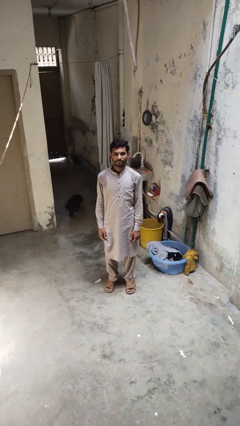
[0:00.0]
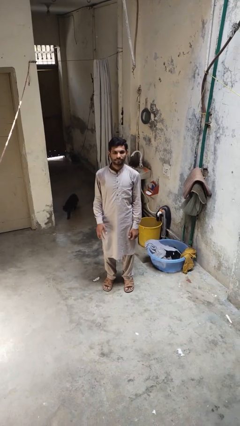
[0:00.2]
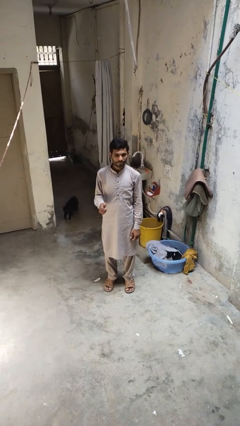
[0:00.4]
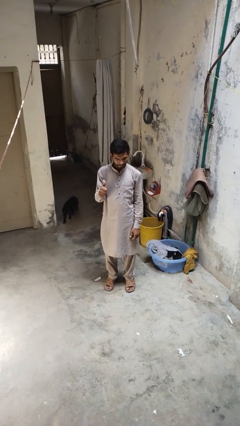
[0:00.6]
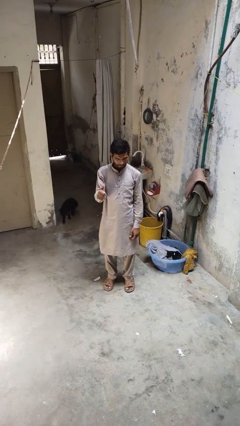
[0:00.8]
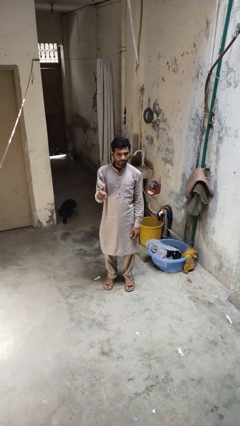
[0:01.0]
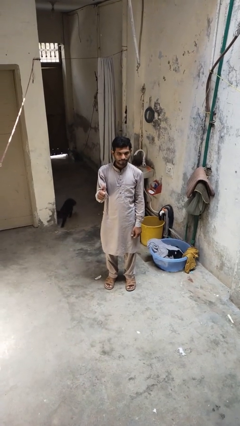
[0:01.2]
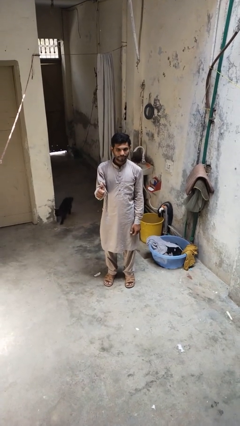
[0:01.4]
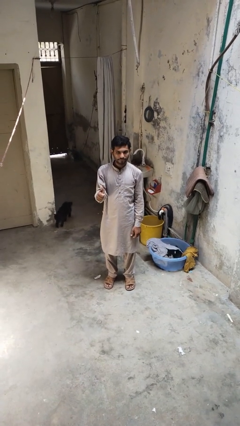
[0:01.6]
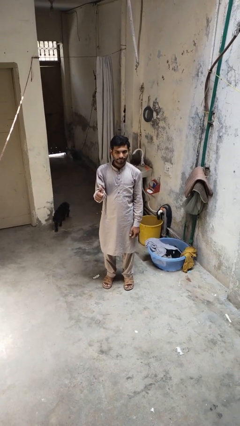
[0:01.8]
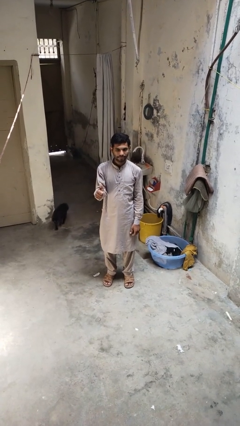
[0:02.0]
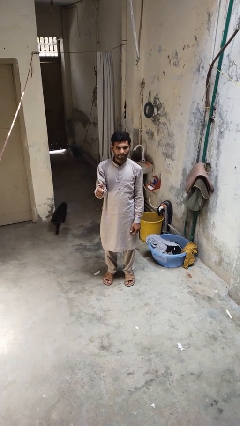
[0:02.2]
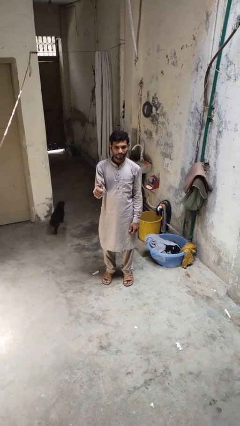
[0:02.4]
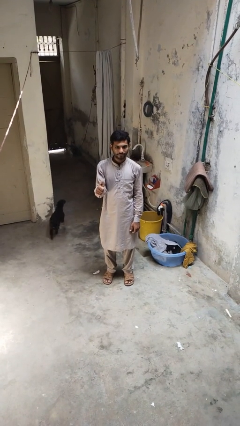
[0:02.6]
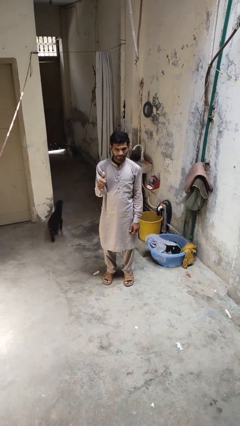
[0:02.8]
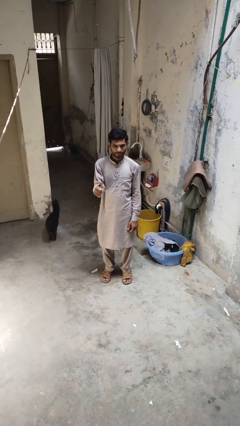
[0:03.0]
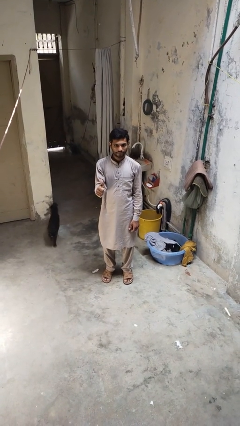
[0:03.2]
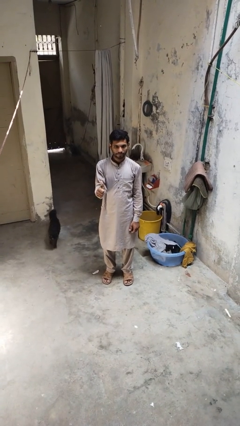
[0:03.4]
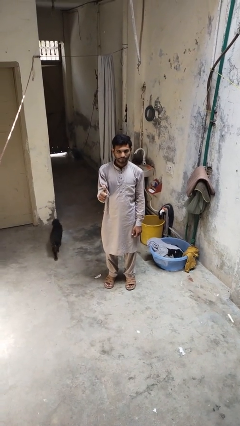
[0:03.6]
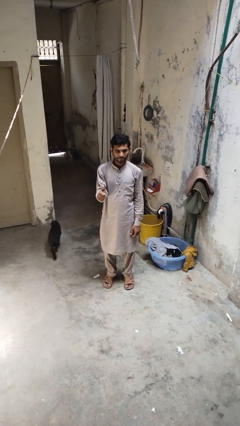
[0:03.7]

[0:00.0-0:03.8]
person gestures thumbs up

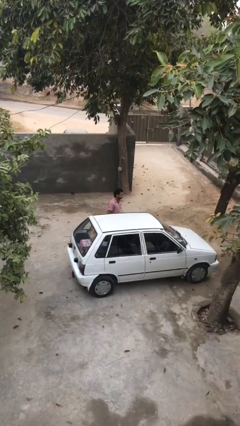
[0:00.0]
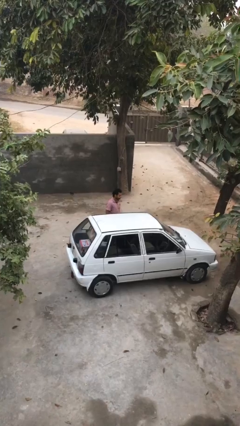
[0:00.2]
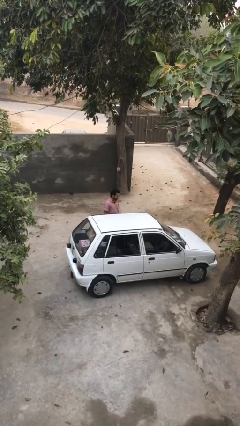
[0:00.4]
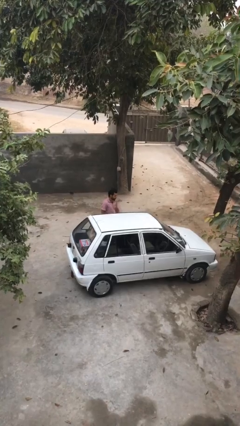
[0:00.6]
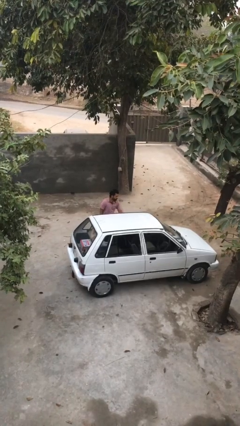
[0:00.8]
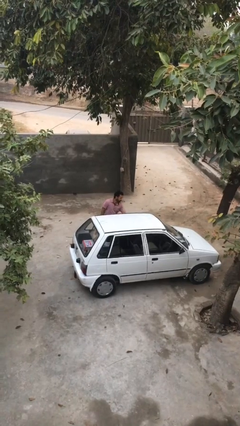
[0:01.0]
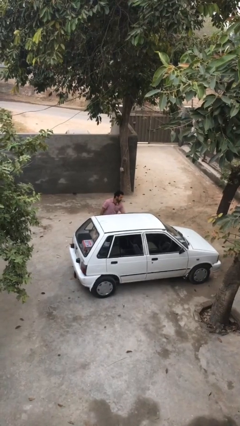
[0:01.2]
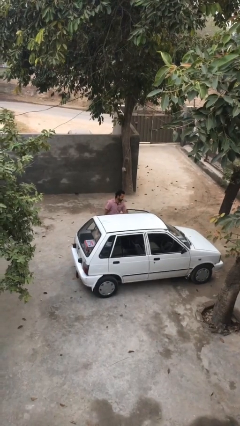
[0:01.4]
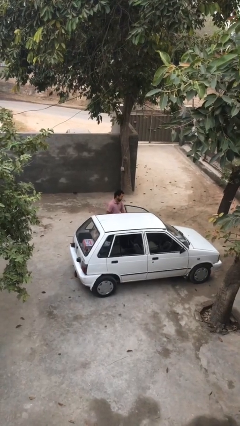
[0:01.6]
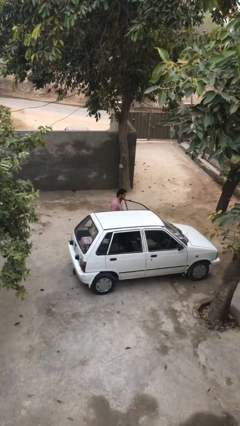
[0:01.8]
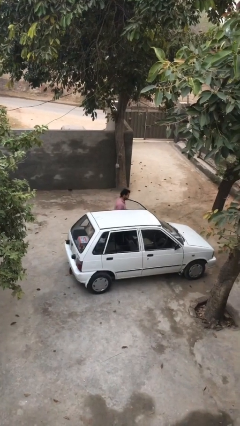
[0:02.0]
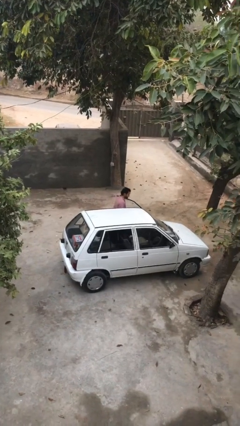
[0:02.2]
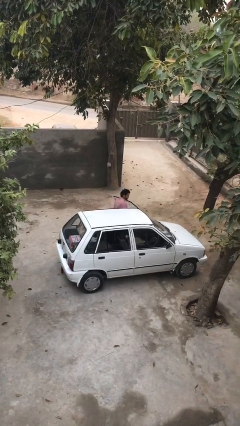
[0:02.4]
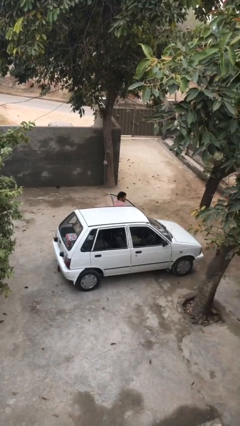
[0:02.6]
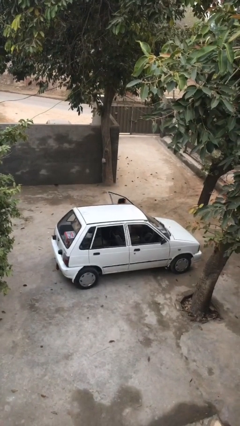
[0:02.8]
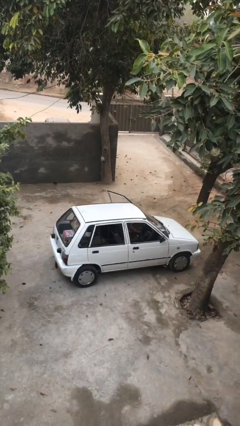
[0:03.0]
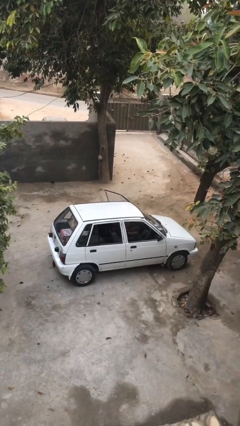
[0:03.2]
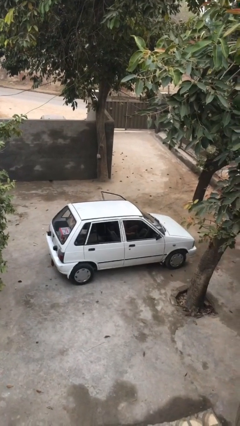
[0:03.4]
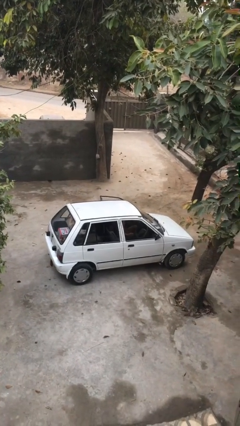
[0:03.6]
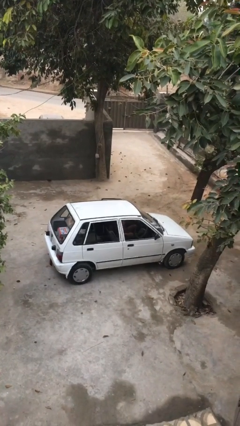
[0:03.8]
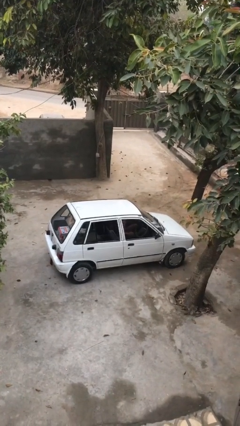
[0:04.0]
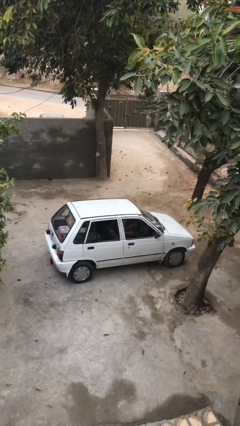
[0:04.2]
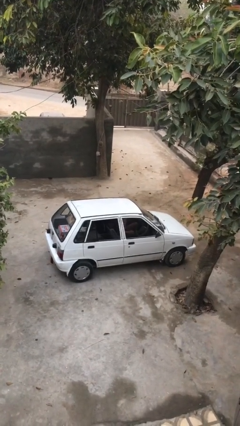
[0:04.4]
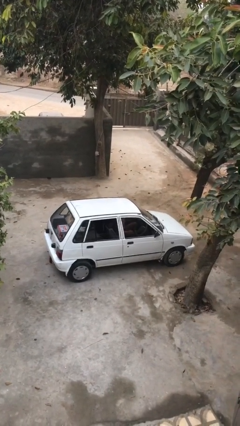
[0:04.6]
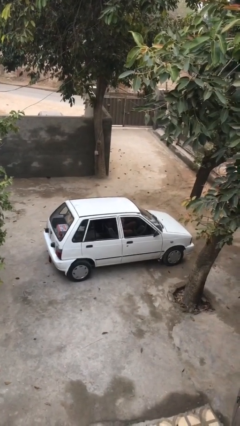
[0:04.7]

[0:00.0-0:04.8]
person enters car

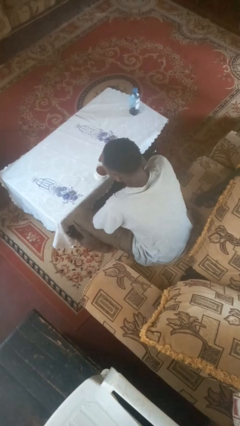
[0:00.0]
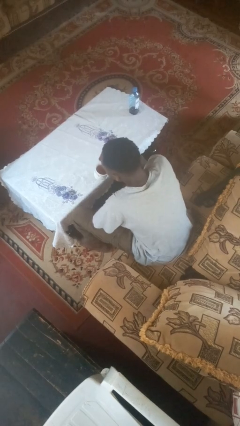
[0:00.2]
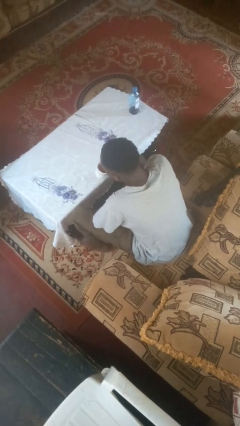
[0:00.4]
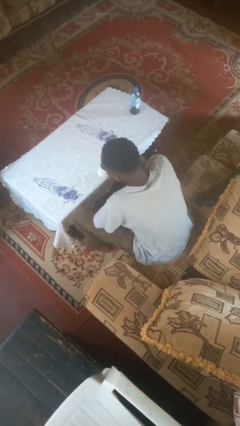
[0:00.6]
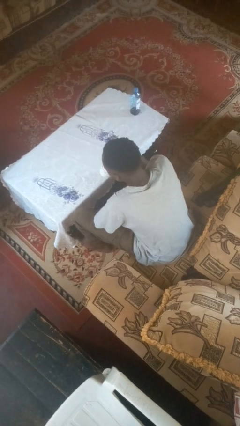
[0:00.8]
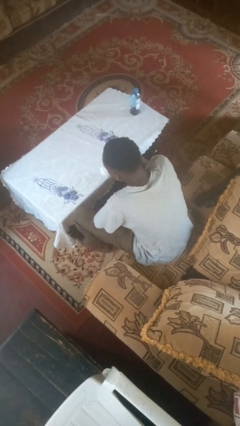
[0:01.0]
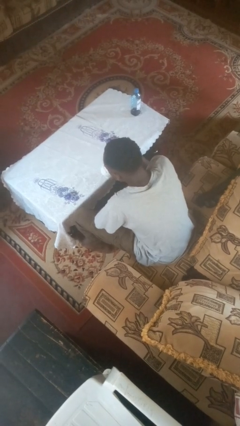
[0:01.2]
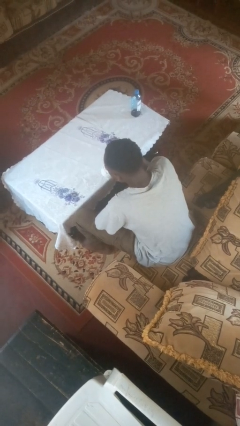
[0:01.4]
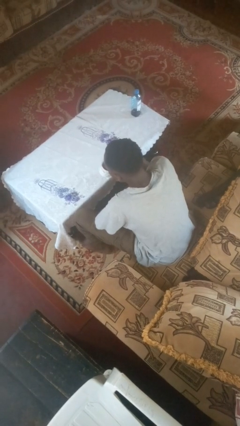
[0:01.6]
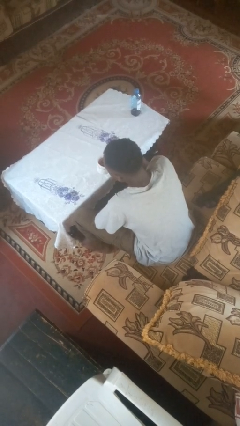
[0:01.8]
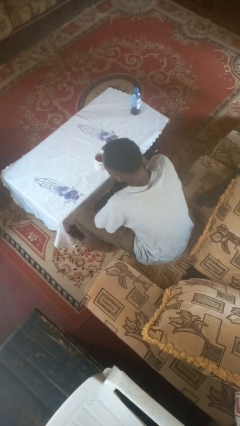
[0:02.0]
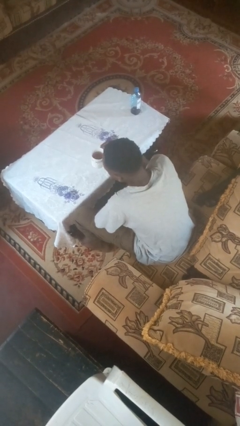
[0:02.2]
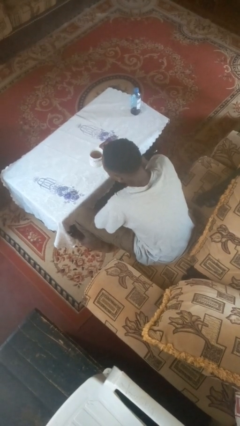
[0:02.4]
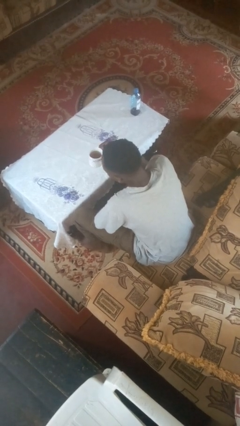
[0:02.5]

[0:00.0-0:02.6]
person drinks from mug

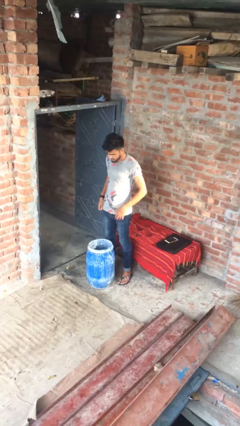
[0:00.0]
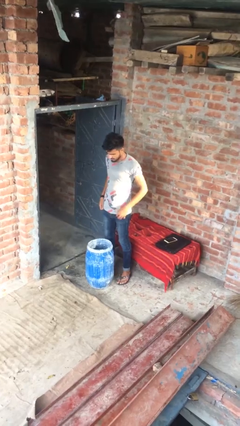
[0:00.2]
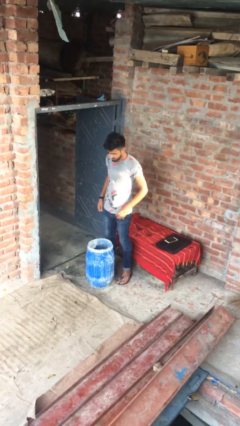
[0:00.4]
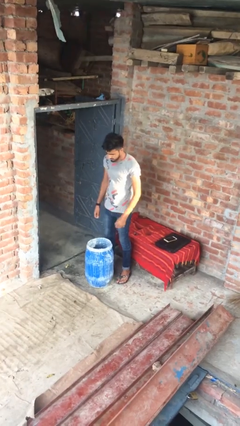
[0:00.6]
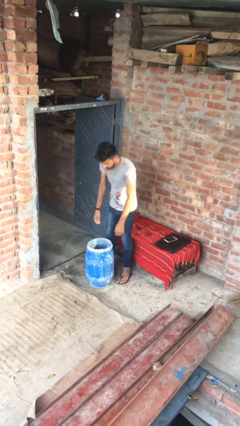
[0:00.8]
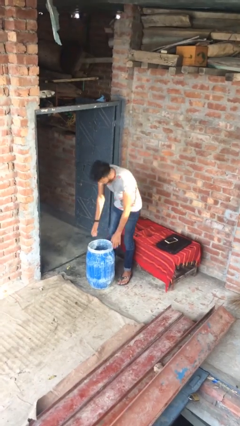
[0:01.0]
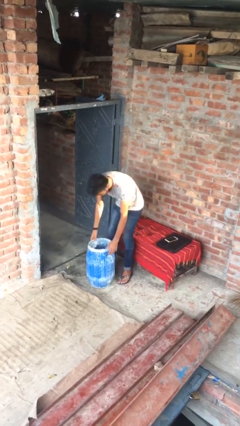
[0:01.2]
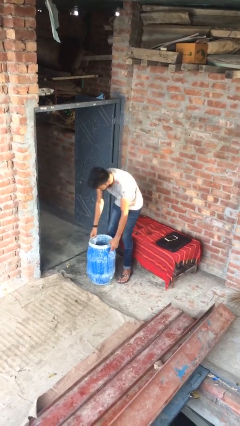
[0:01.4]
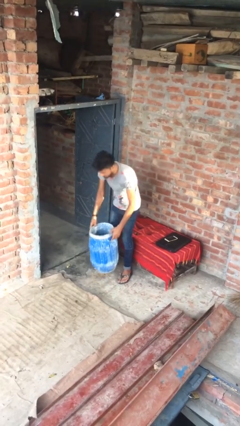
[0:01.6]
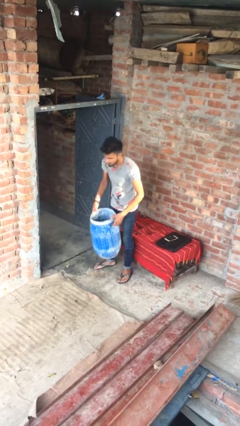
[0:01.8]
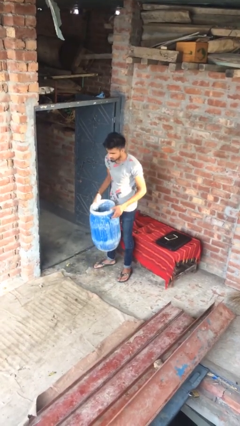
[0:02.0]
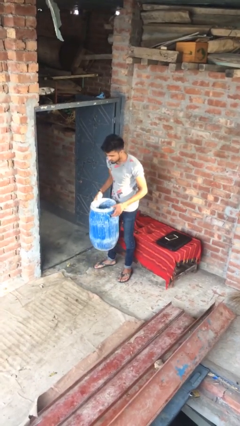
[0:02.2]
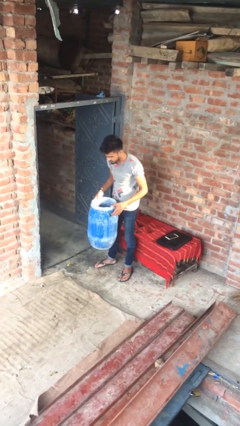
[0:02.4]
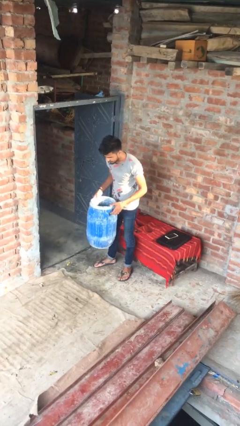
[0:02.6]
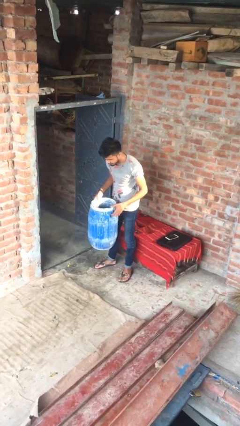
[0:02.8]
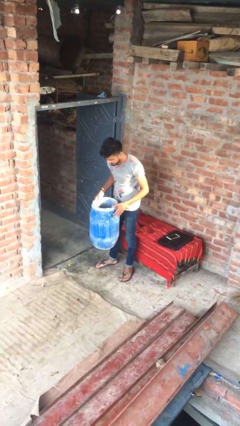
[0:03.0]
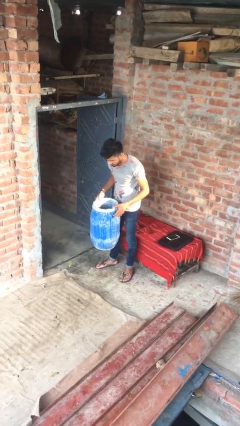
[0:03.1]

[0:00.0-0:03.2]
person picks up object from floor

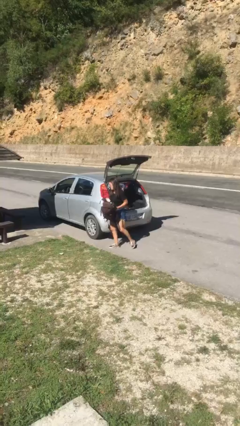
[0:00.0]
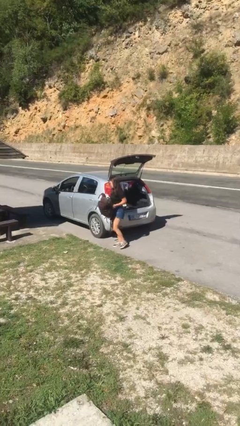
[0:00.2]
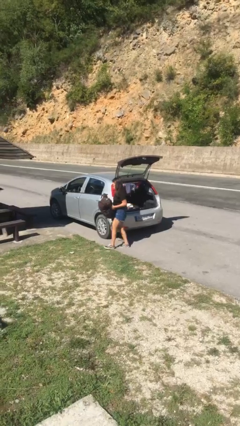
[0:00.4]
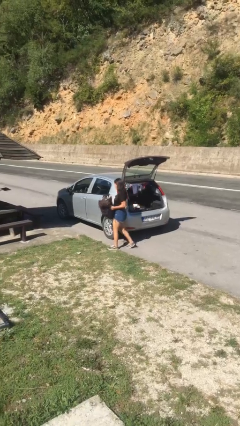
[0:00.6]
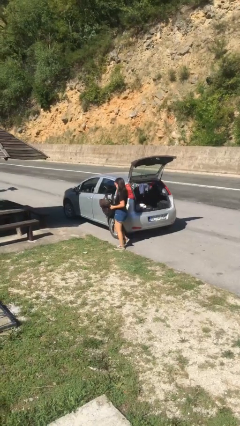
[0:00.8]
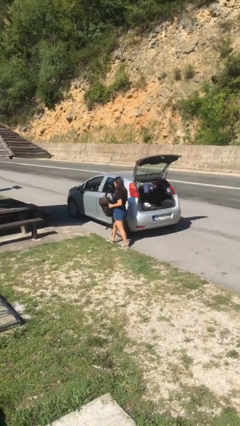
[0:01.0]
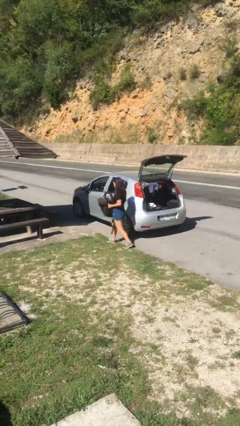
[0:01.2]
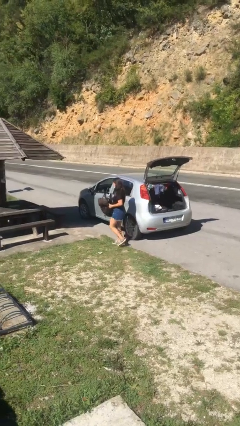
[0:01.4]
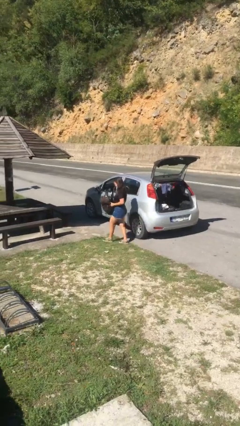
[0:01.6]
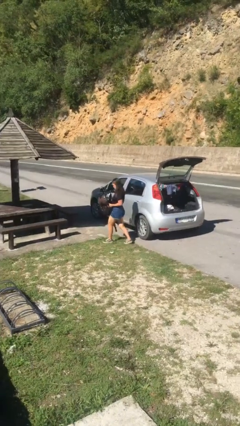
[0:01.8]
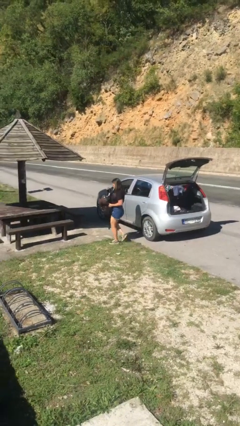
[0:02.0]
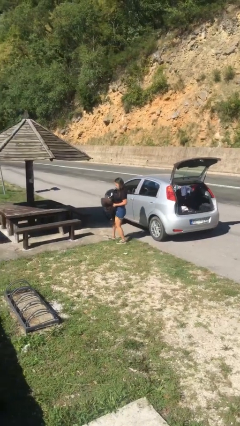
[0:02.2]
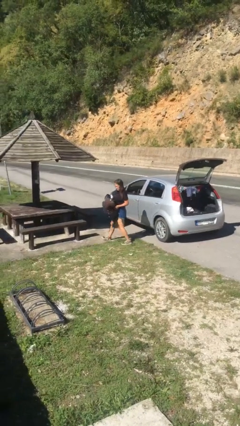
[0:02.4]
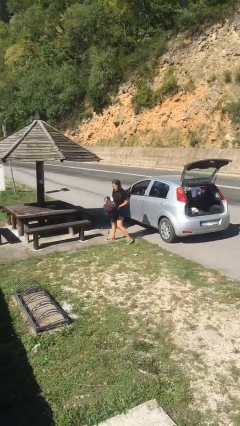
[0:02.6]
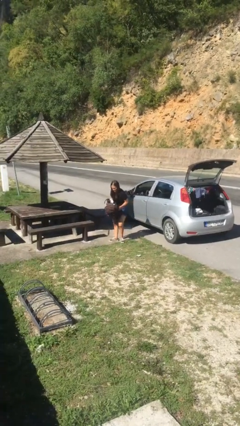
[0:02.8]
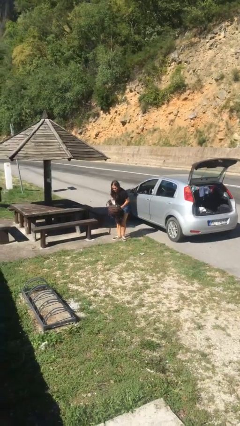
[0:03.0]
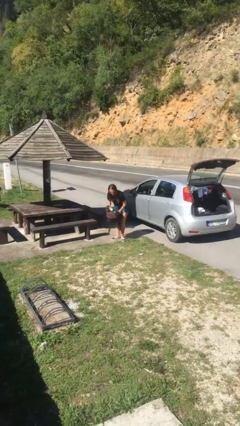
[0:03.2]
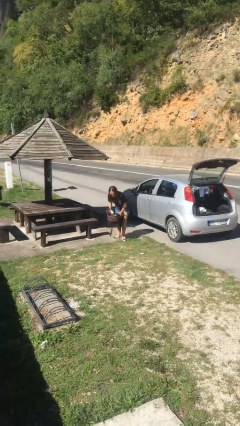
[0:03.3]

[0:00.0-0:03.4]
person carries heavy object
